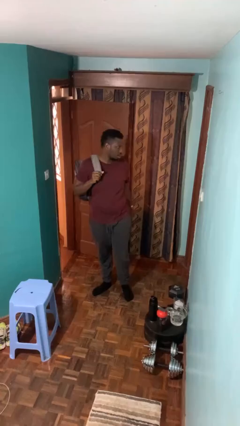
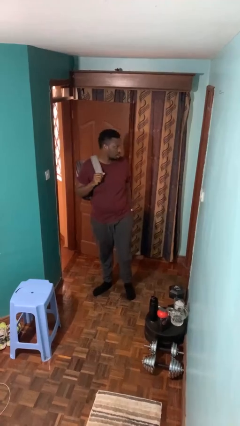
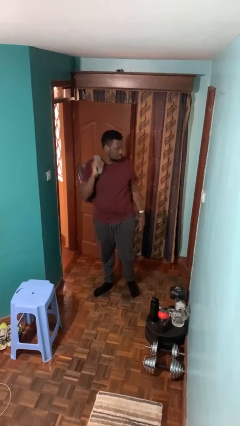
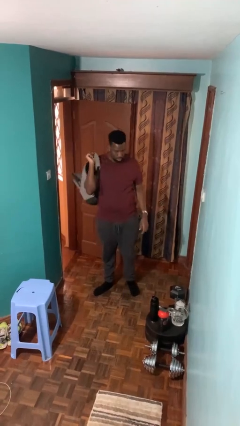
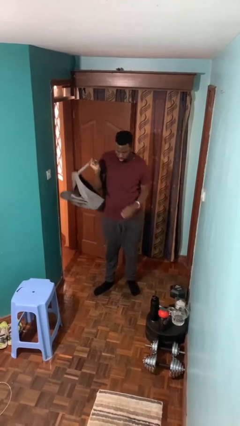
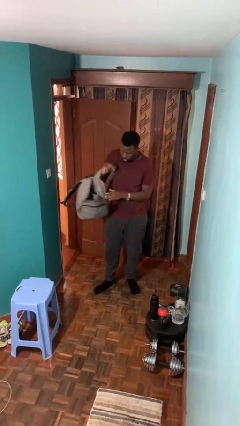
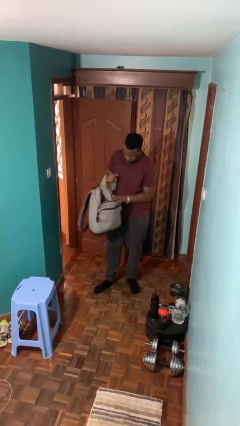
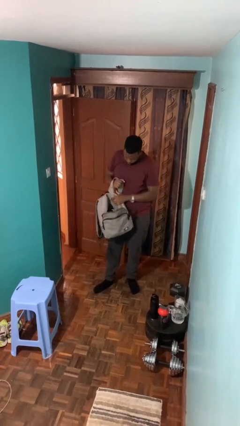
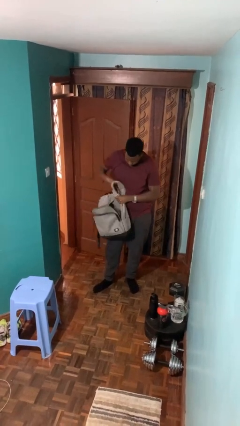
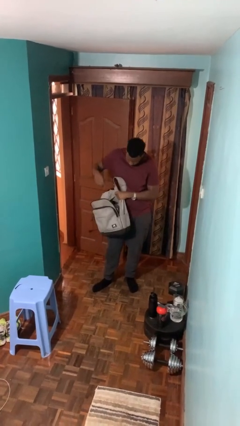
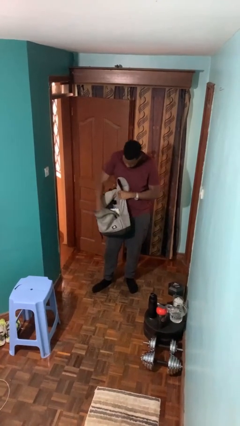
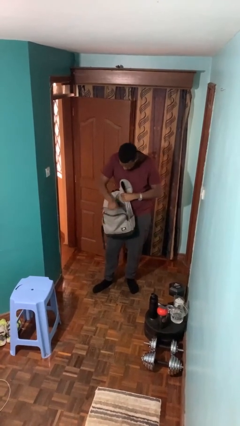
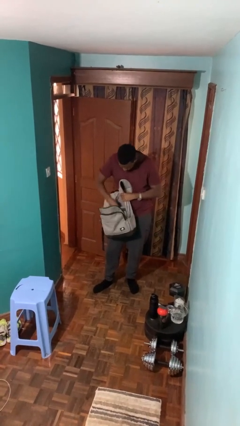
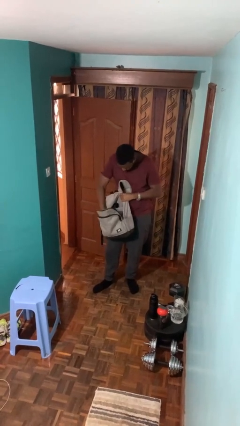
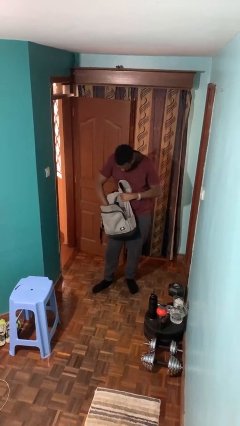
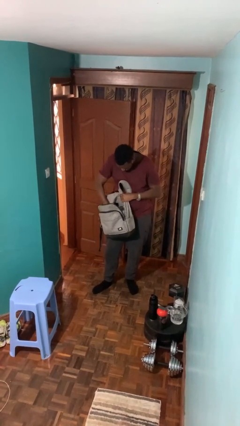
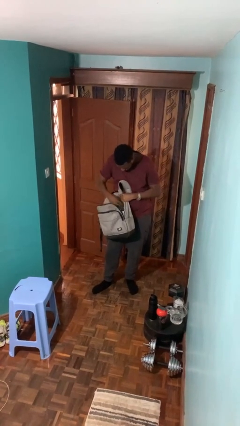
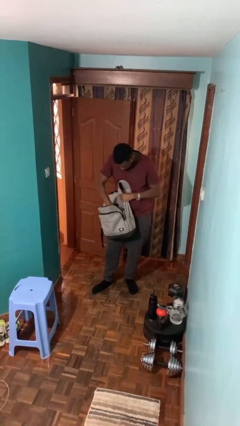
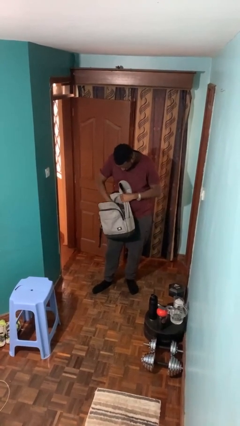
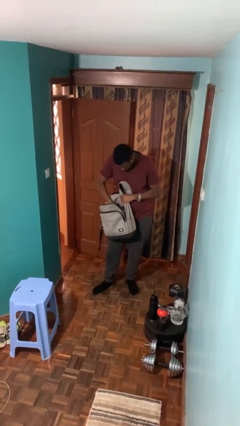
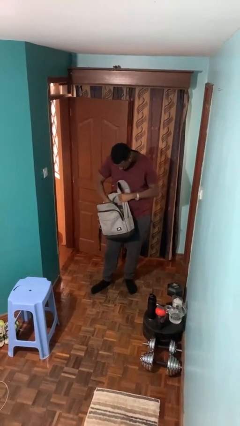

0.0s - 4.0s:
person searches in backpack

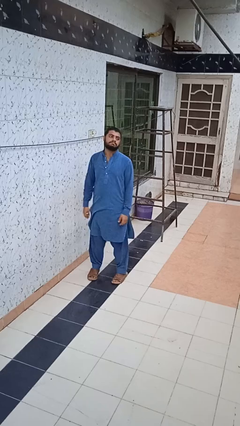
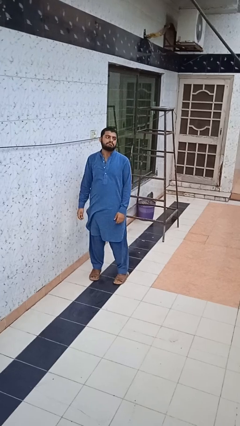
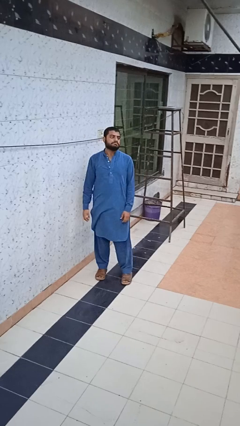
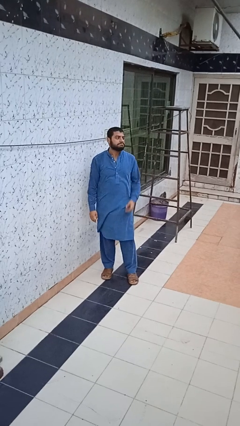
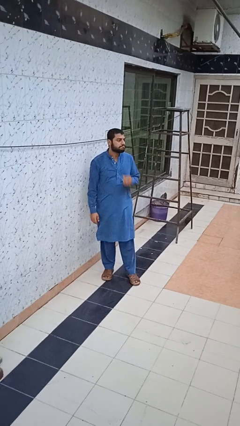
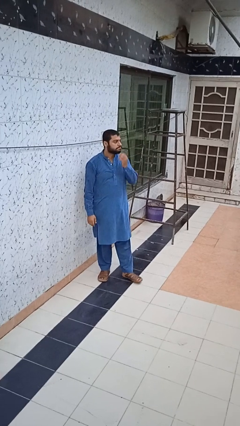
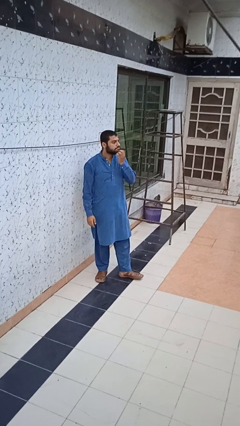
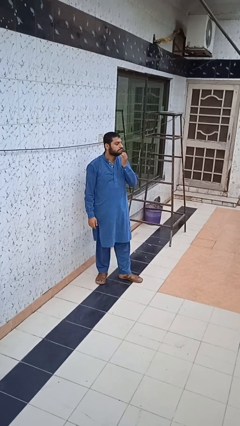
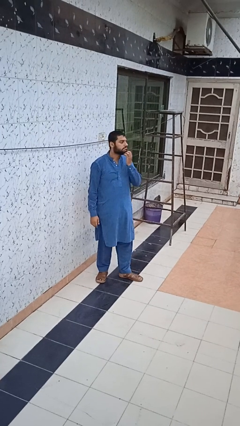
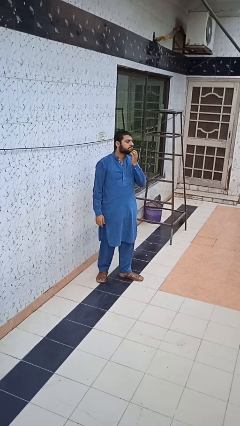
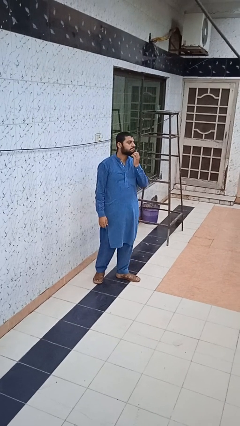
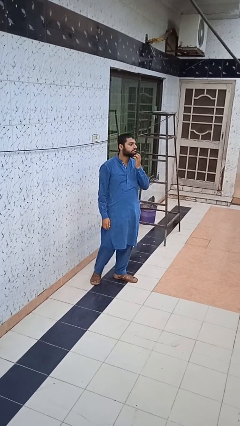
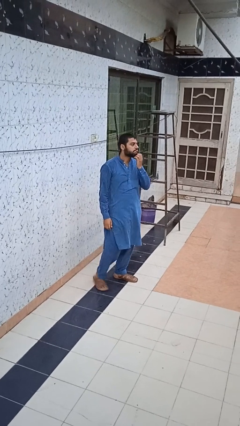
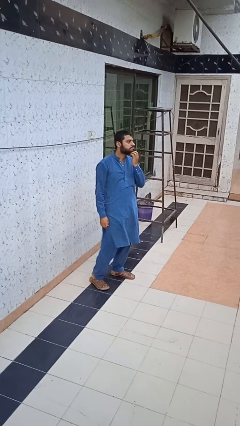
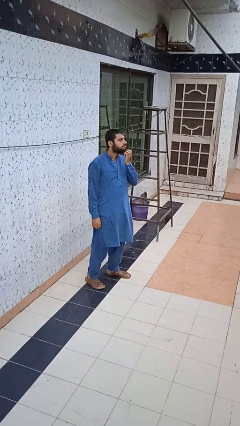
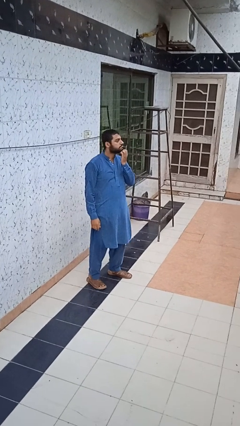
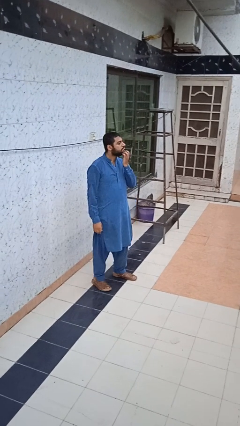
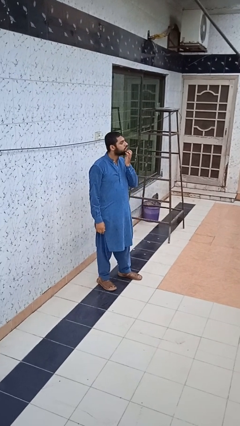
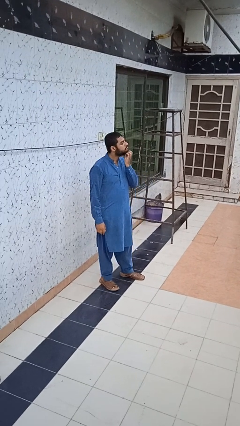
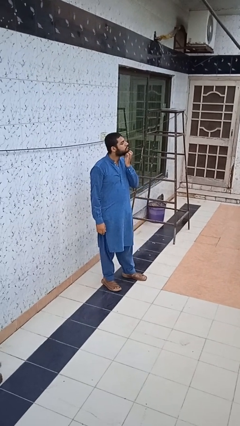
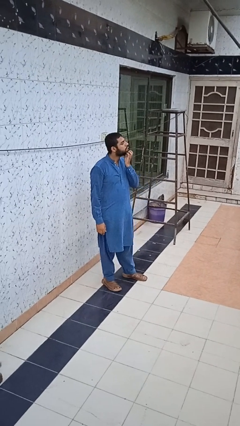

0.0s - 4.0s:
person strokes chin

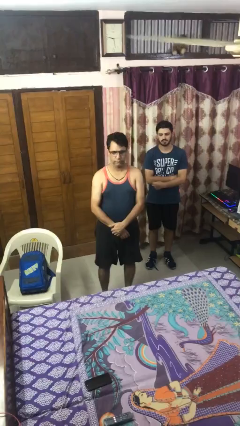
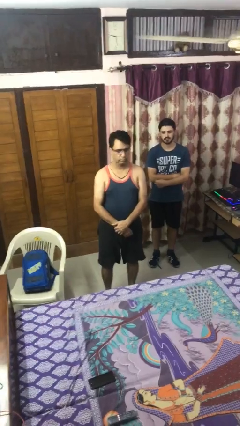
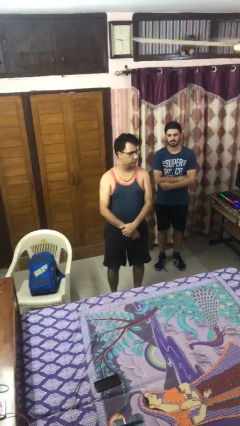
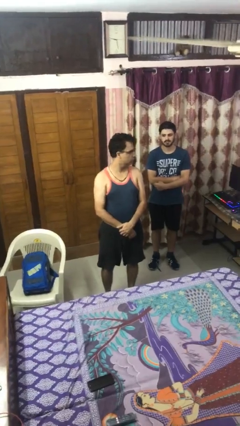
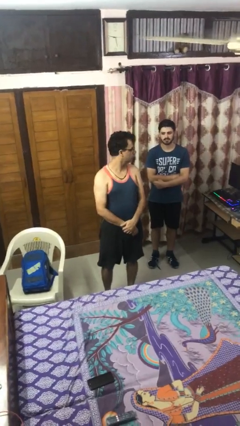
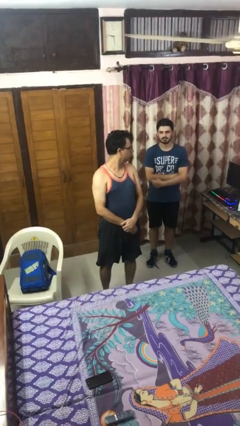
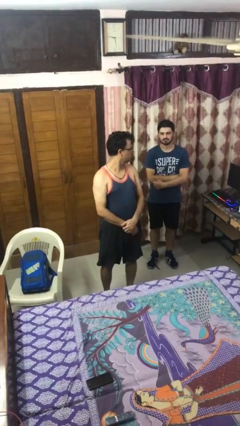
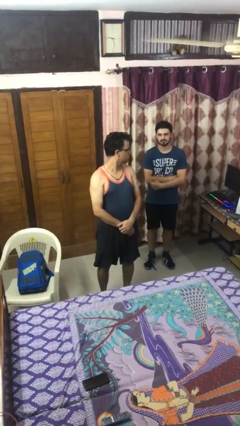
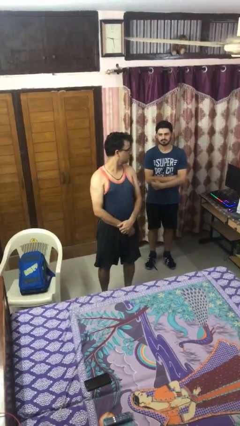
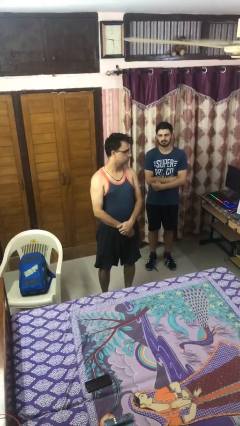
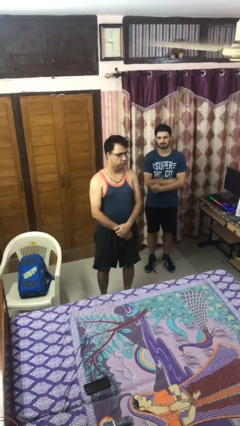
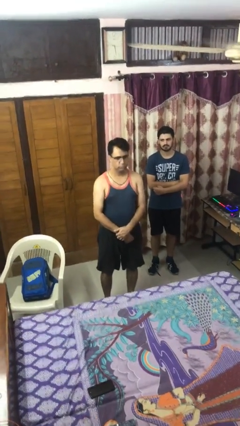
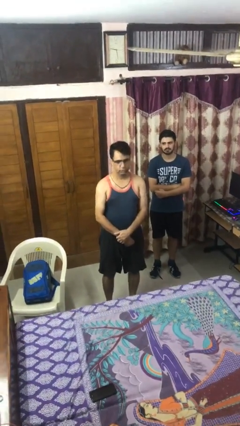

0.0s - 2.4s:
person looks over shoulder

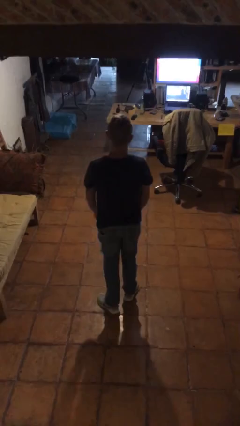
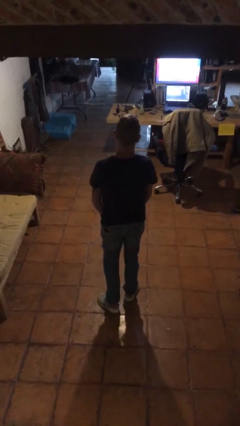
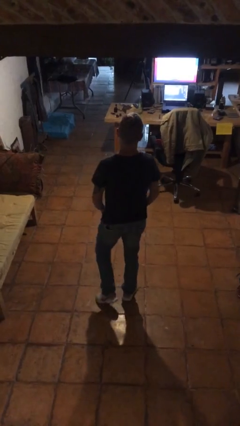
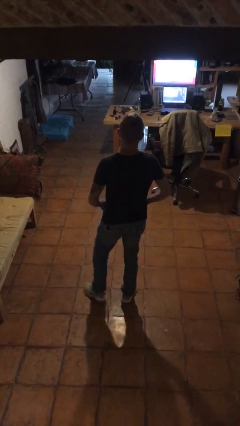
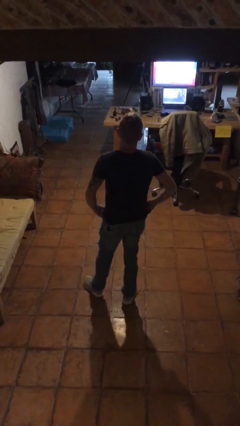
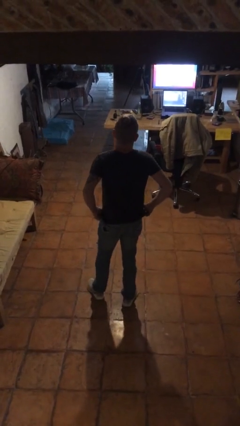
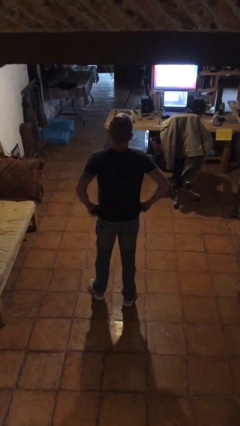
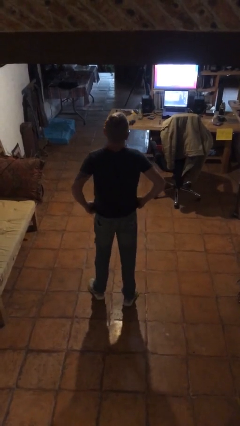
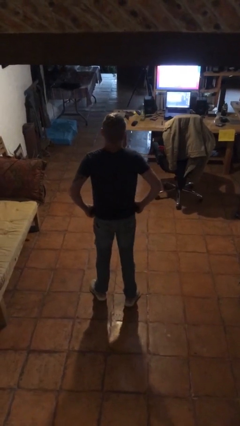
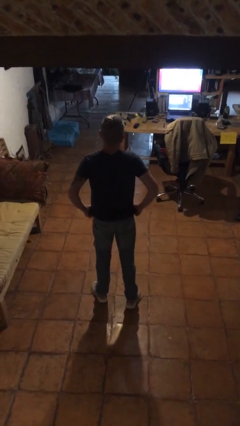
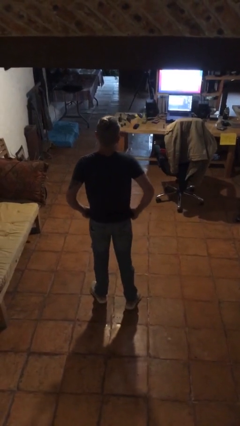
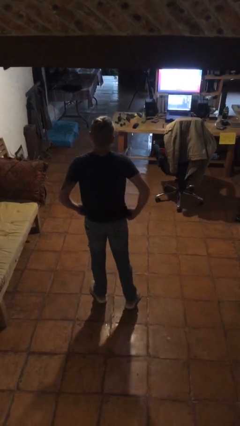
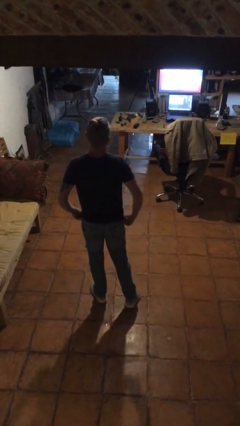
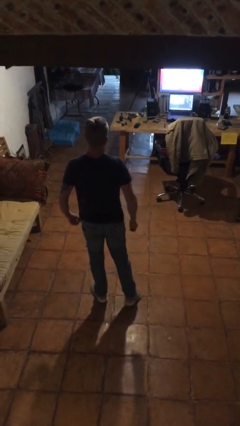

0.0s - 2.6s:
person hikes up pants

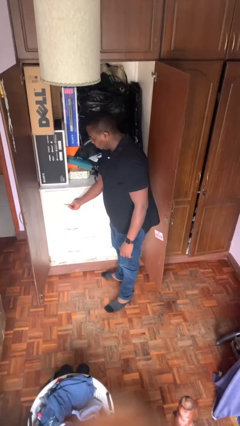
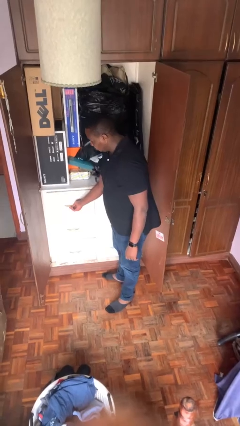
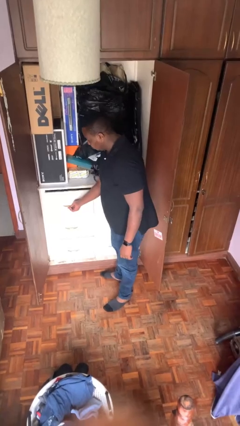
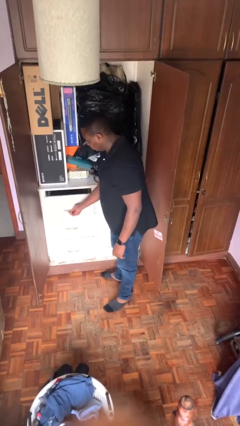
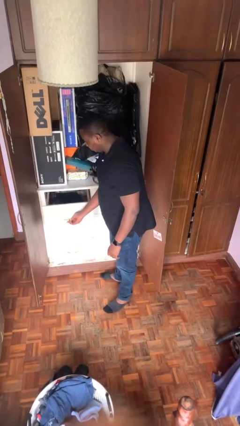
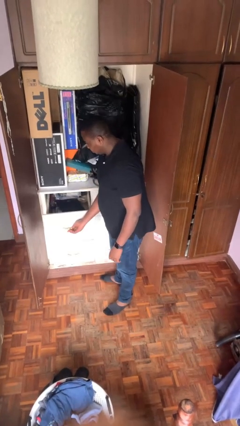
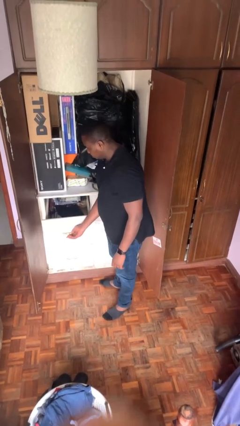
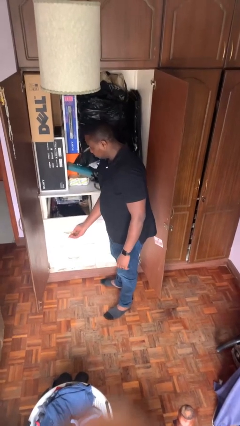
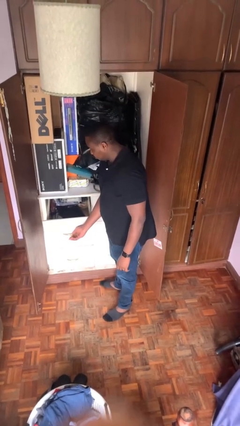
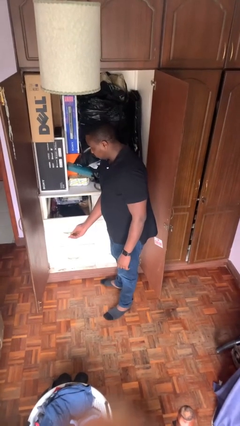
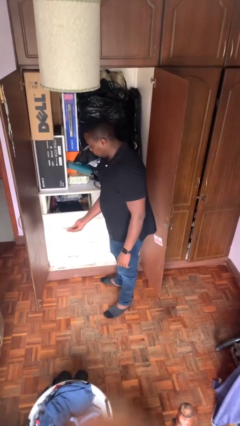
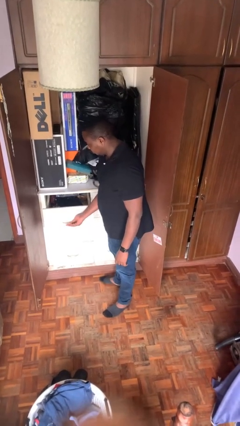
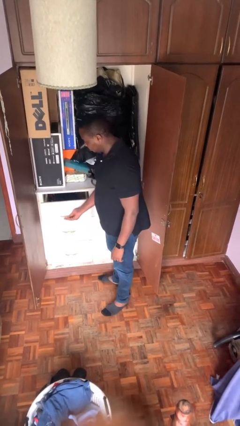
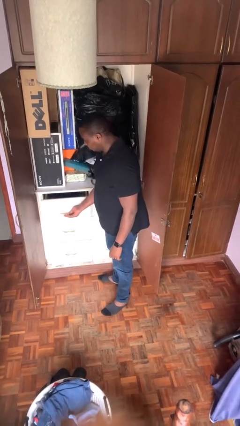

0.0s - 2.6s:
person opens dresser drawer

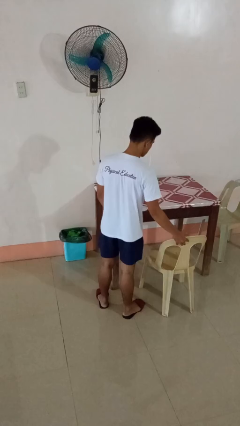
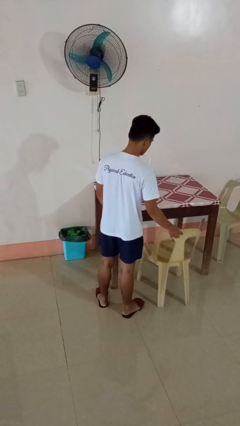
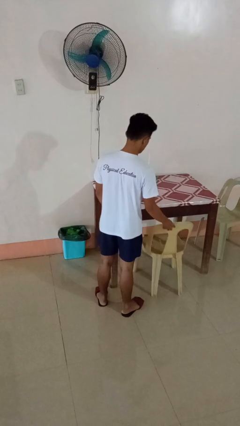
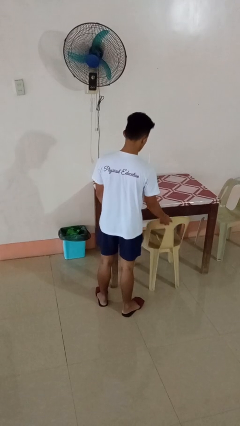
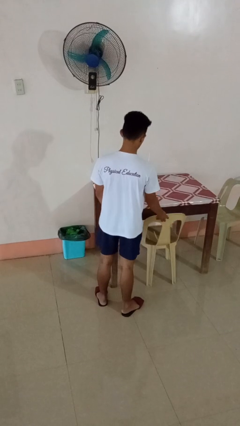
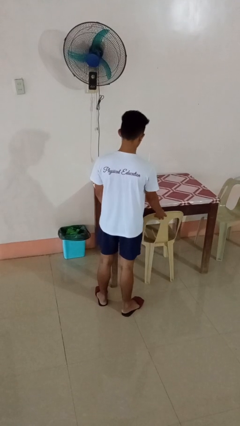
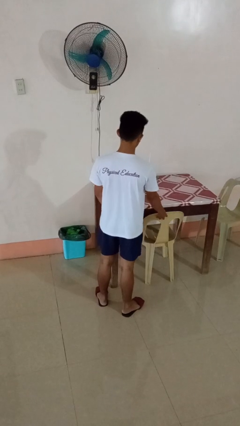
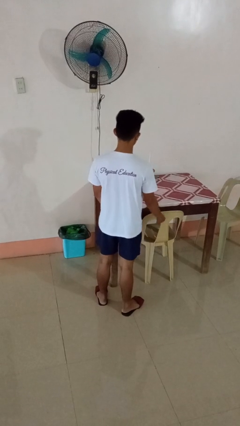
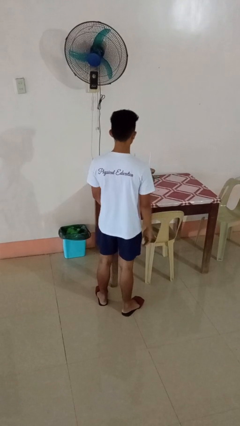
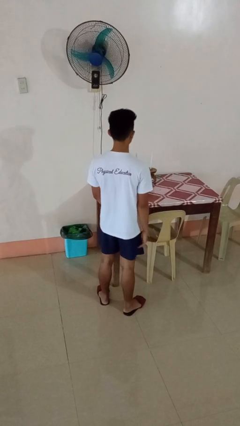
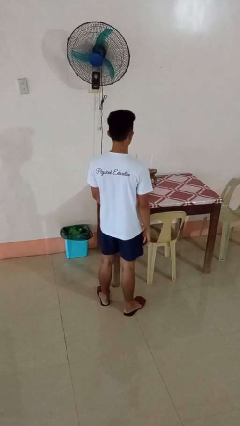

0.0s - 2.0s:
person pushes in chair
